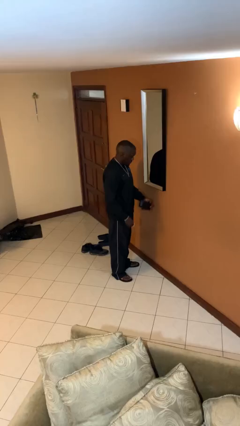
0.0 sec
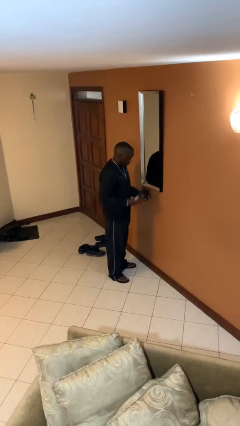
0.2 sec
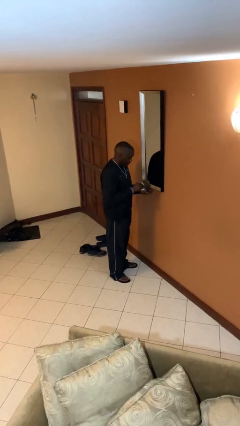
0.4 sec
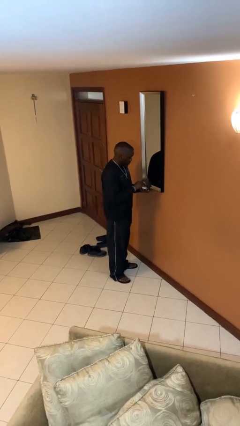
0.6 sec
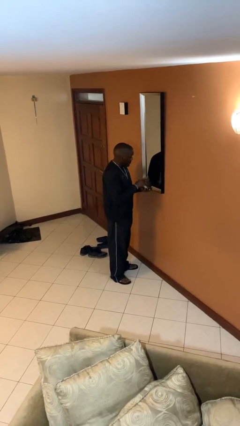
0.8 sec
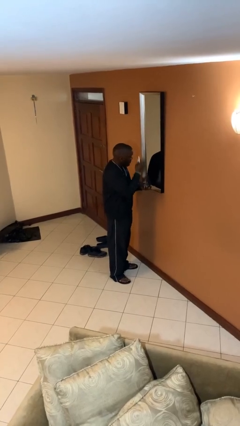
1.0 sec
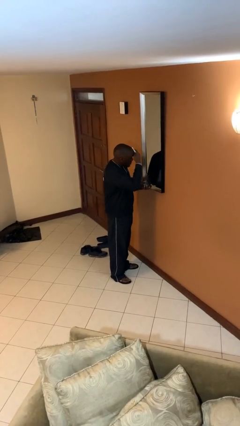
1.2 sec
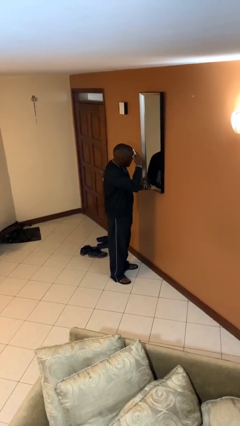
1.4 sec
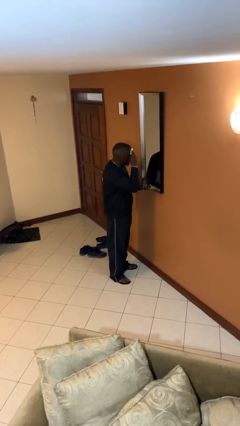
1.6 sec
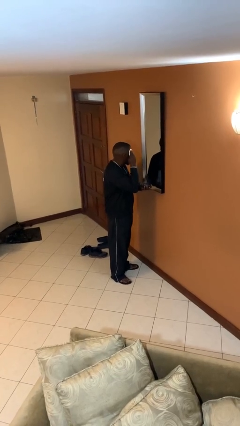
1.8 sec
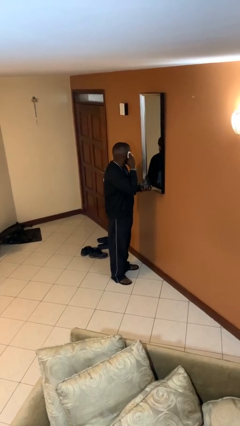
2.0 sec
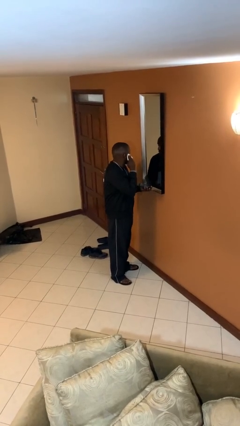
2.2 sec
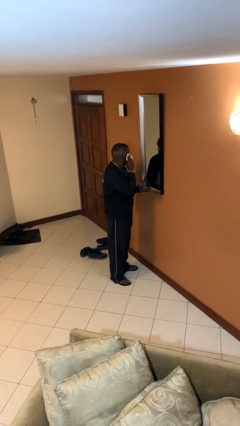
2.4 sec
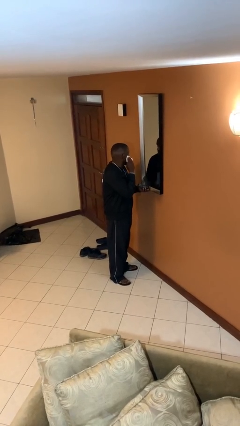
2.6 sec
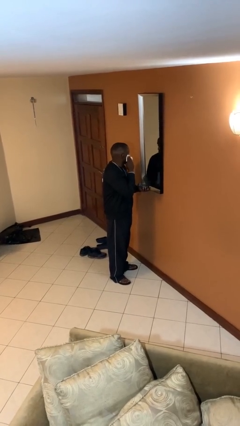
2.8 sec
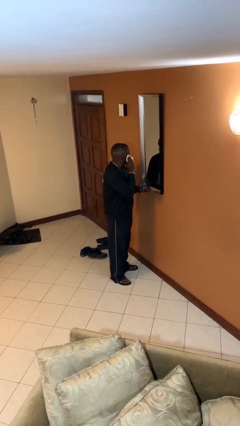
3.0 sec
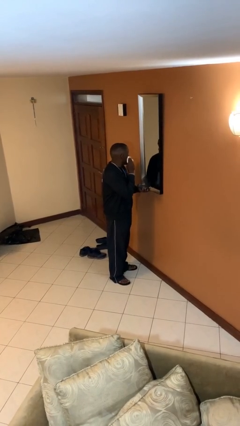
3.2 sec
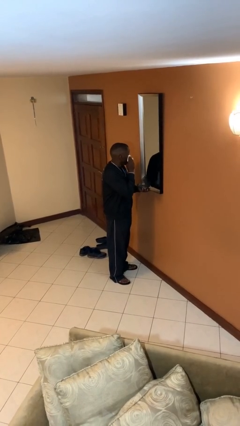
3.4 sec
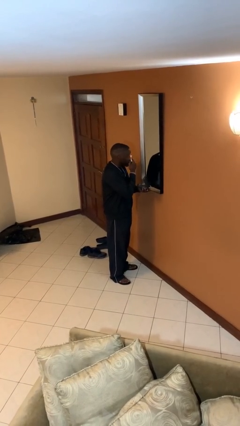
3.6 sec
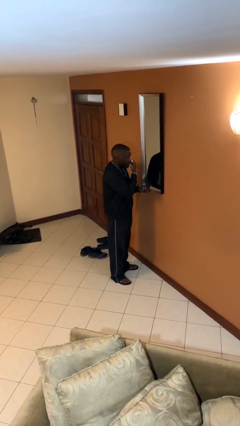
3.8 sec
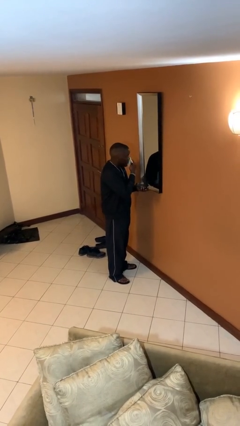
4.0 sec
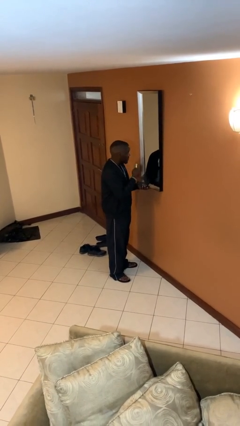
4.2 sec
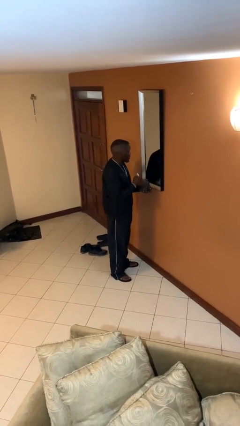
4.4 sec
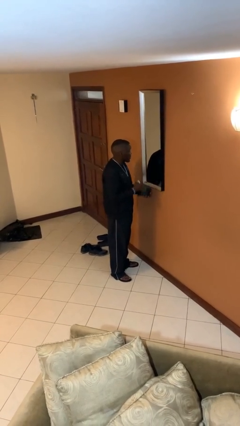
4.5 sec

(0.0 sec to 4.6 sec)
person applies foundation makeup

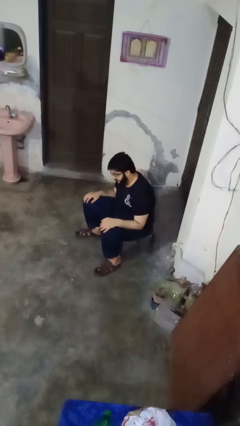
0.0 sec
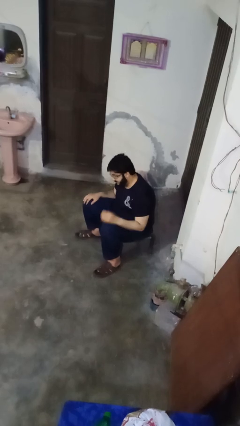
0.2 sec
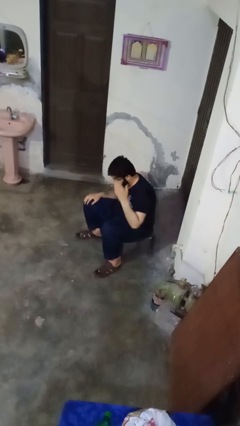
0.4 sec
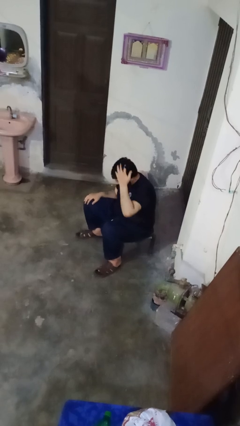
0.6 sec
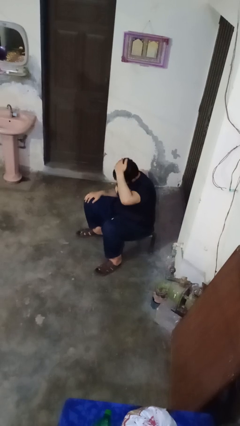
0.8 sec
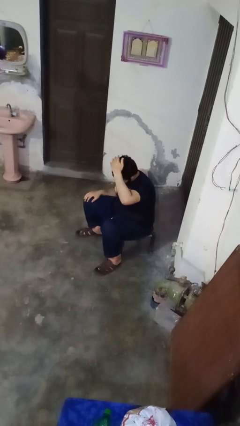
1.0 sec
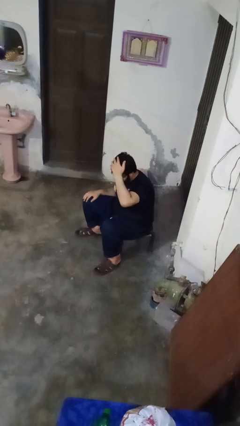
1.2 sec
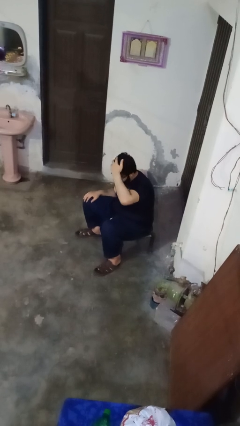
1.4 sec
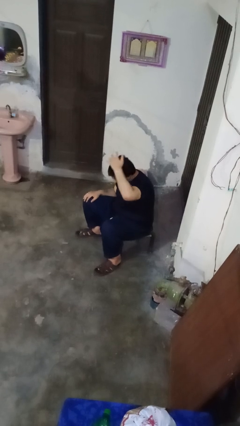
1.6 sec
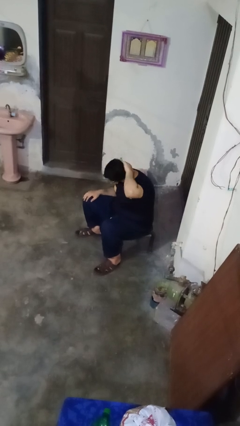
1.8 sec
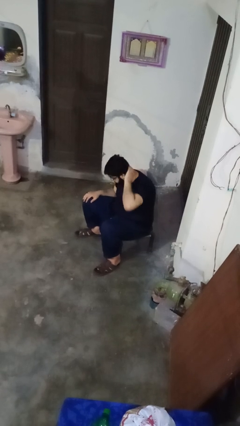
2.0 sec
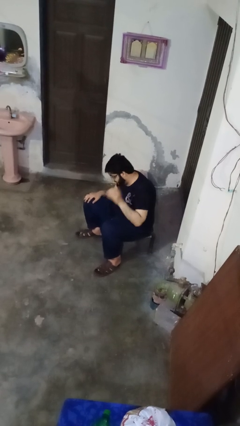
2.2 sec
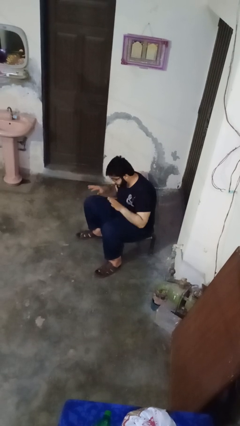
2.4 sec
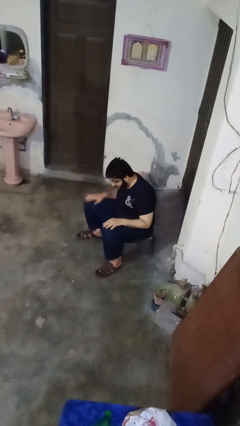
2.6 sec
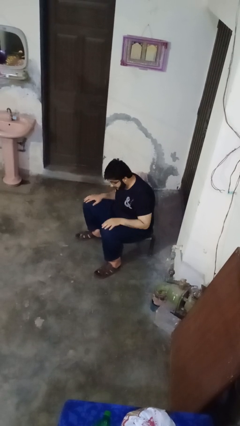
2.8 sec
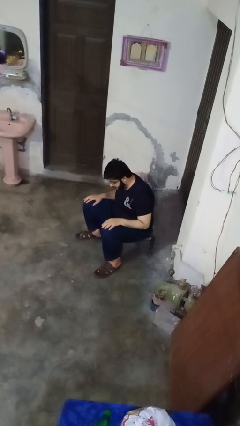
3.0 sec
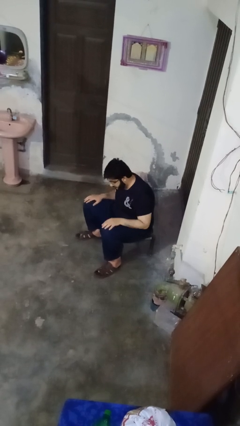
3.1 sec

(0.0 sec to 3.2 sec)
person strokes hair

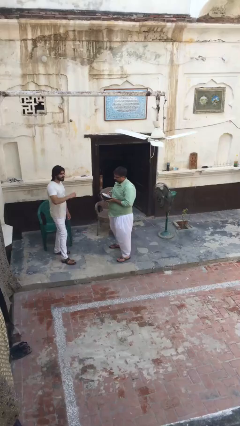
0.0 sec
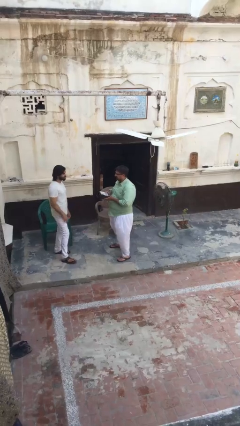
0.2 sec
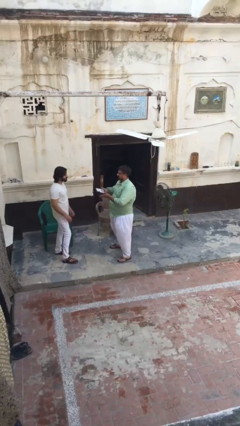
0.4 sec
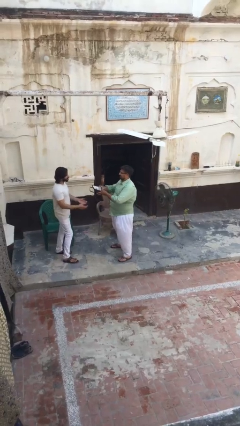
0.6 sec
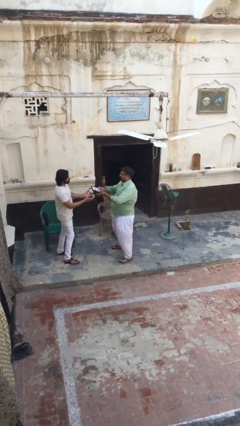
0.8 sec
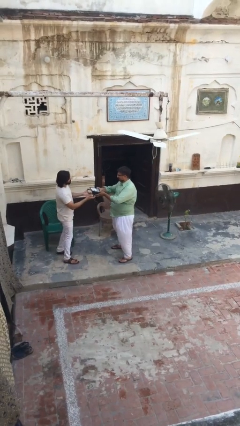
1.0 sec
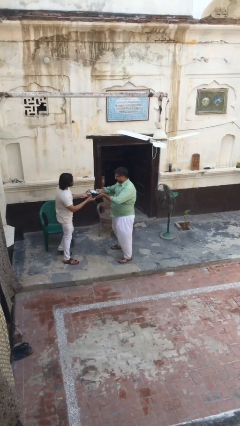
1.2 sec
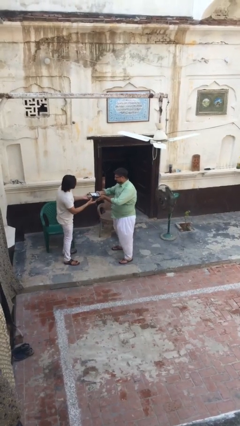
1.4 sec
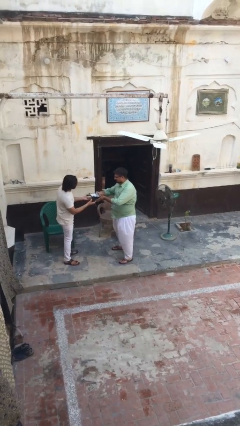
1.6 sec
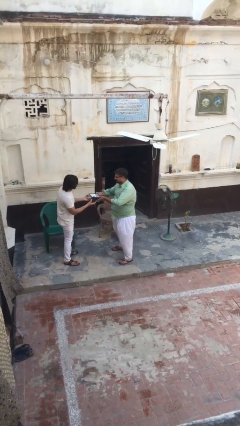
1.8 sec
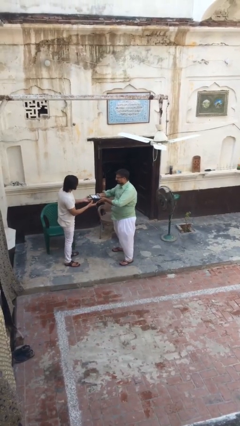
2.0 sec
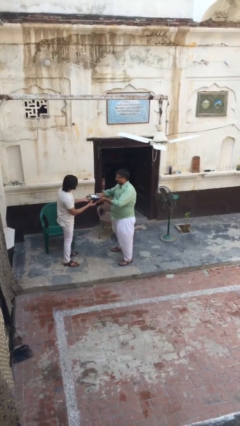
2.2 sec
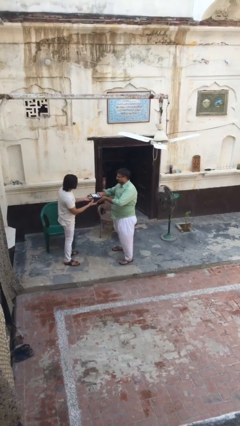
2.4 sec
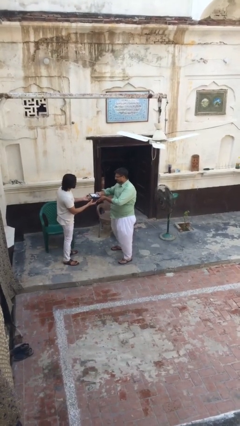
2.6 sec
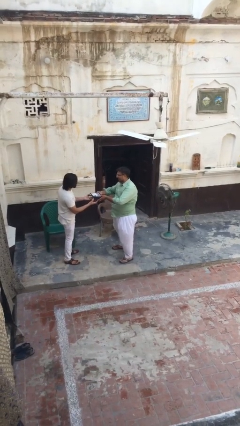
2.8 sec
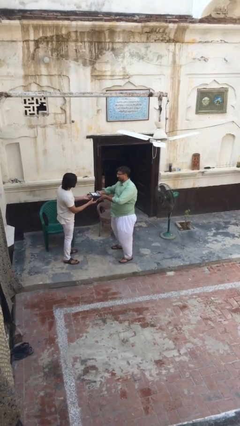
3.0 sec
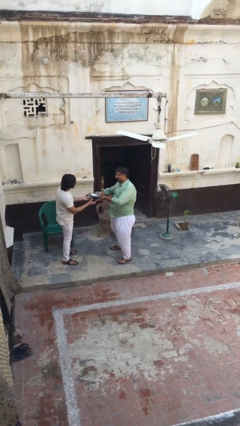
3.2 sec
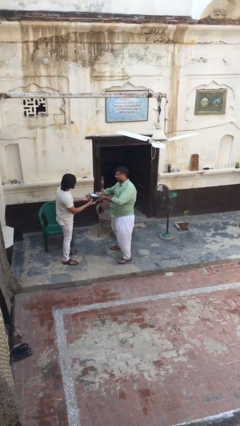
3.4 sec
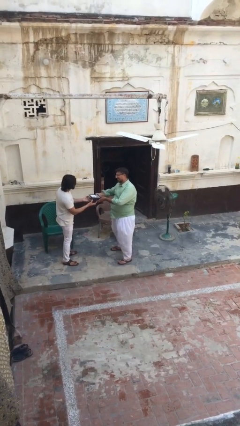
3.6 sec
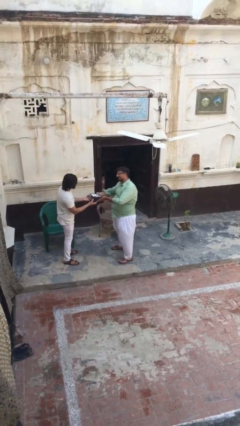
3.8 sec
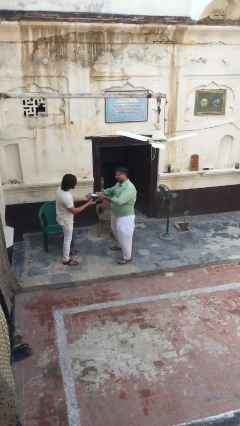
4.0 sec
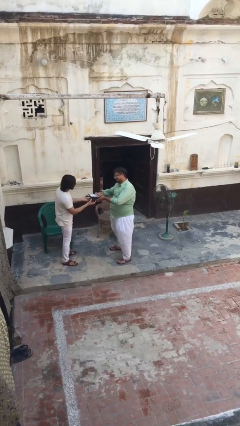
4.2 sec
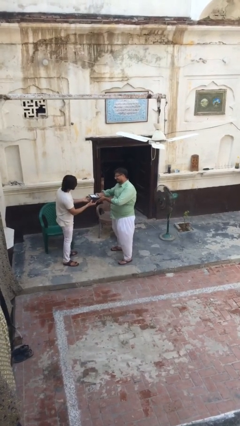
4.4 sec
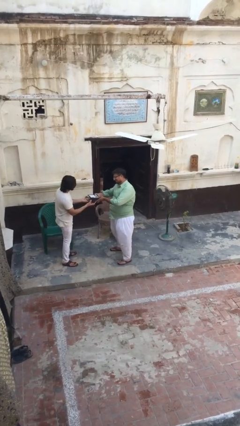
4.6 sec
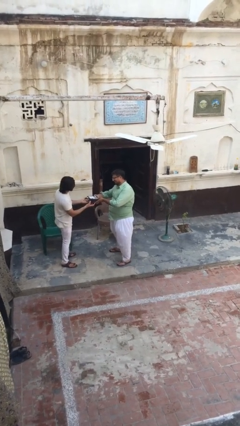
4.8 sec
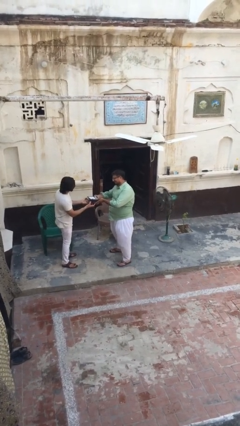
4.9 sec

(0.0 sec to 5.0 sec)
person transfers object to person

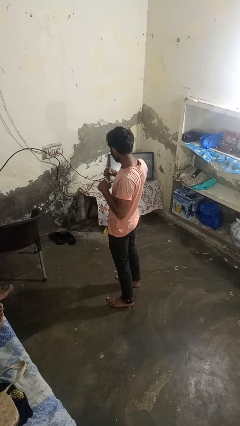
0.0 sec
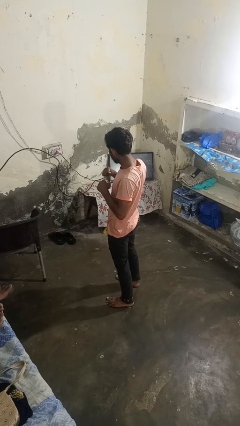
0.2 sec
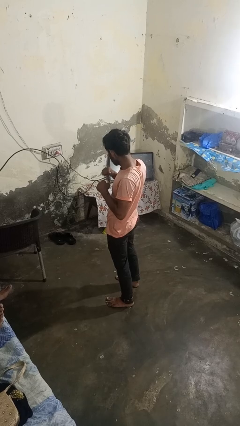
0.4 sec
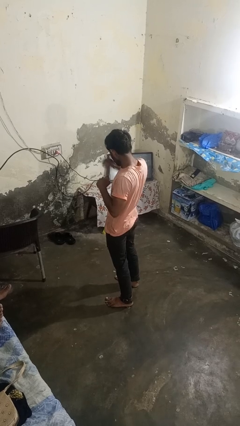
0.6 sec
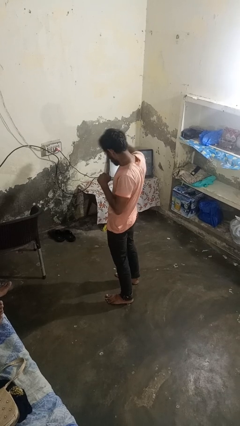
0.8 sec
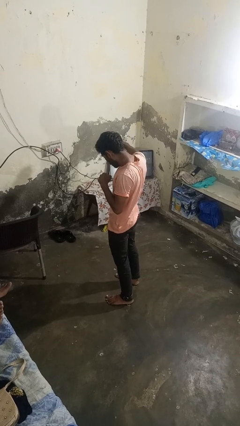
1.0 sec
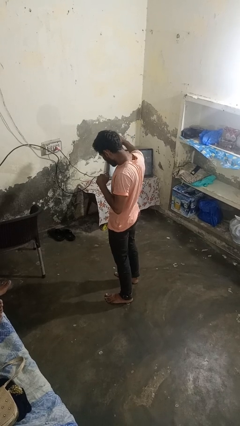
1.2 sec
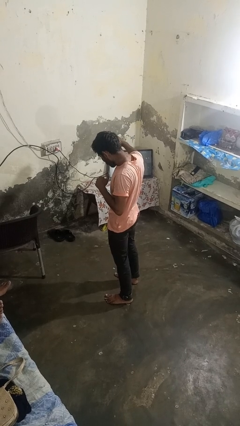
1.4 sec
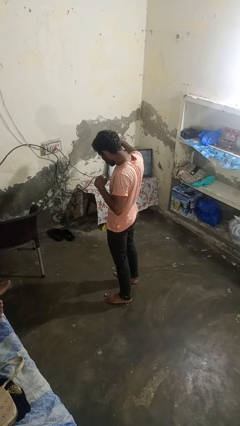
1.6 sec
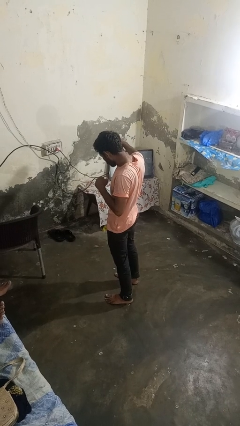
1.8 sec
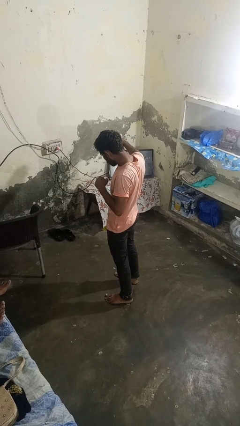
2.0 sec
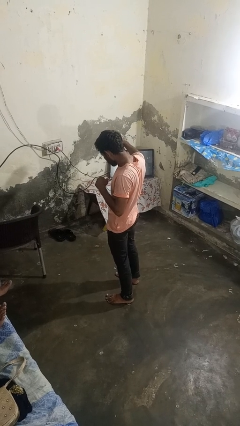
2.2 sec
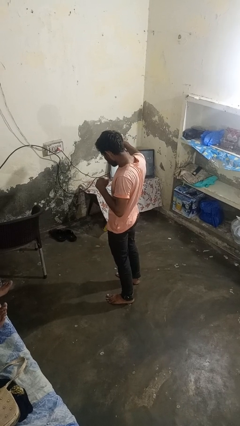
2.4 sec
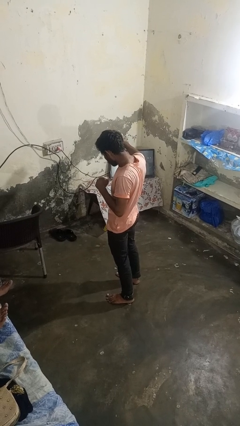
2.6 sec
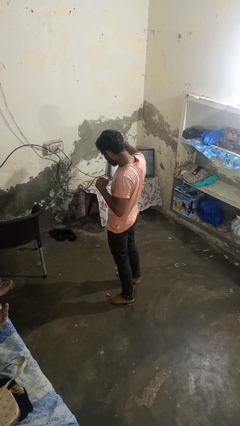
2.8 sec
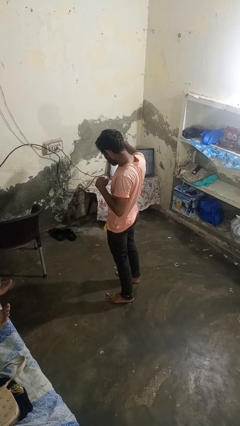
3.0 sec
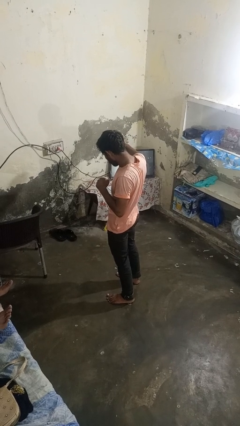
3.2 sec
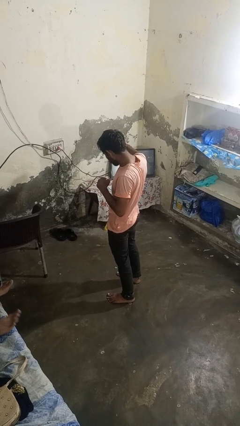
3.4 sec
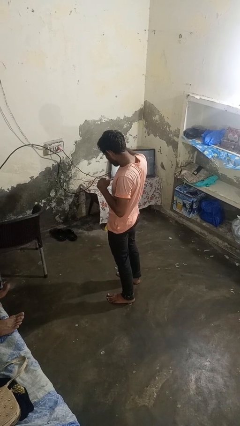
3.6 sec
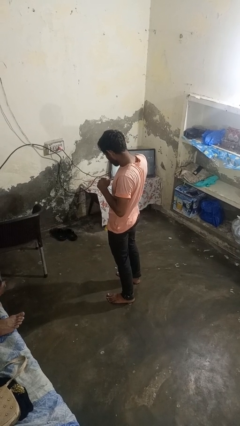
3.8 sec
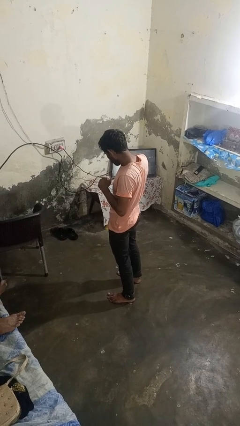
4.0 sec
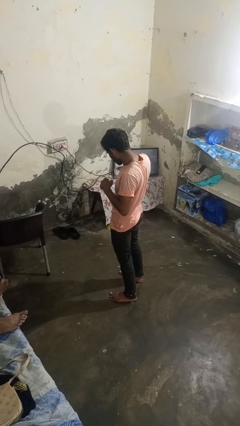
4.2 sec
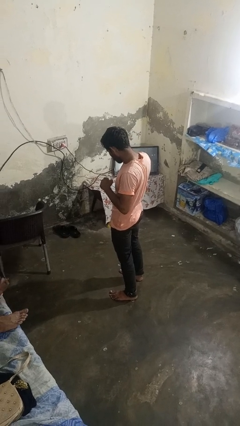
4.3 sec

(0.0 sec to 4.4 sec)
person karate chop

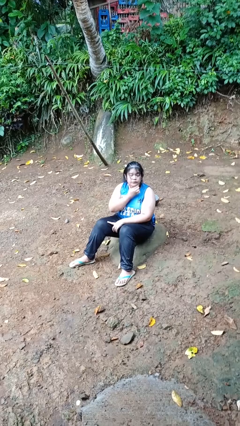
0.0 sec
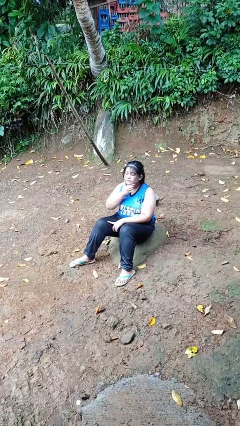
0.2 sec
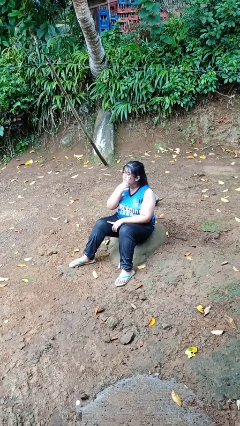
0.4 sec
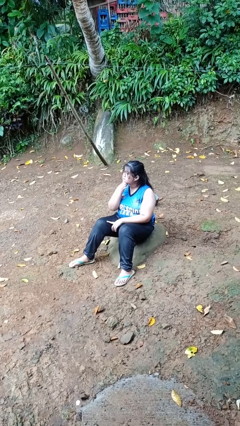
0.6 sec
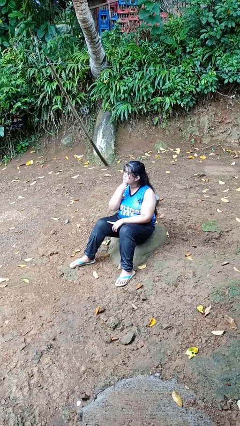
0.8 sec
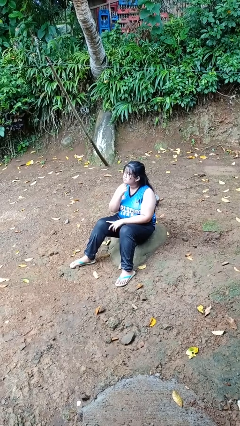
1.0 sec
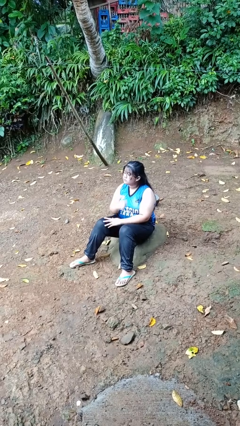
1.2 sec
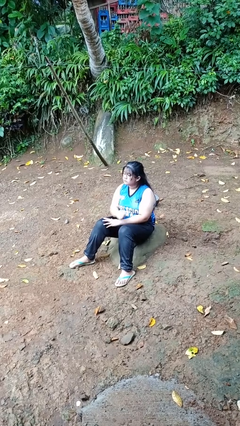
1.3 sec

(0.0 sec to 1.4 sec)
person strokes chin
